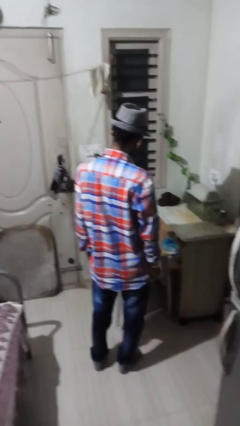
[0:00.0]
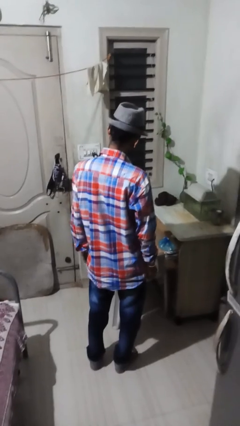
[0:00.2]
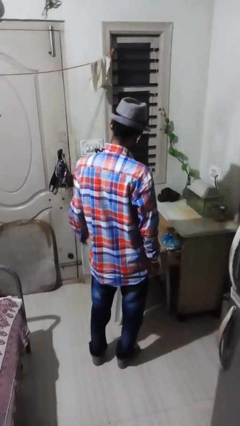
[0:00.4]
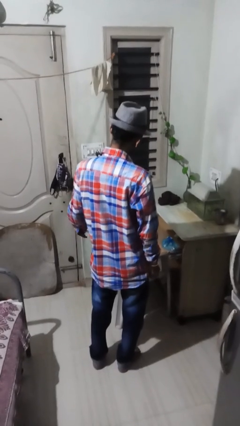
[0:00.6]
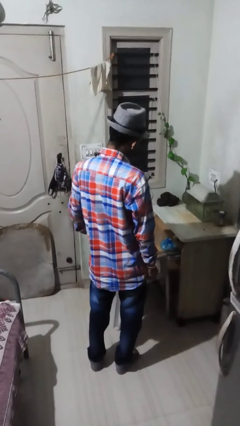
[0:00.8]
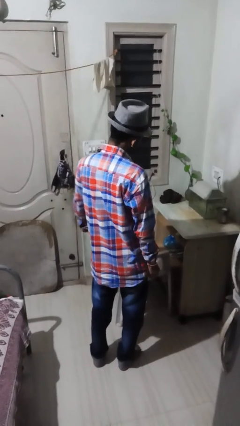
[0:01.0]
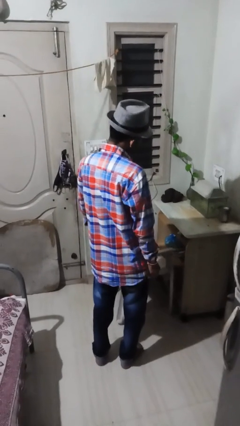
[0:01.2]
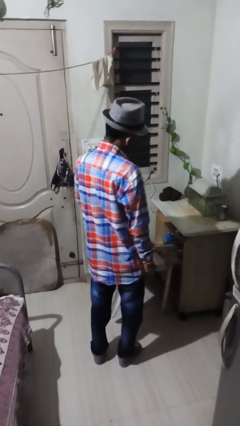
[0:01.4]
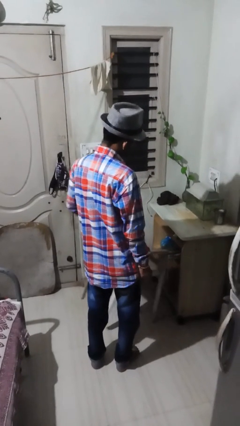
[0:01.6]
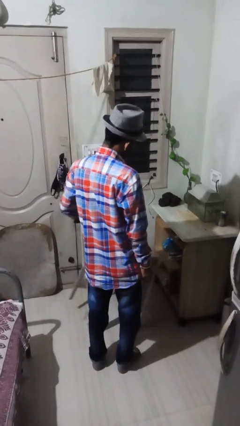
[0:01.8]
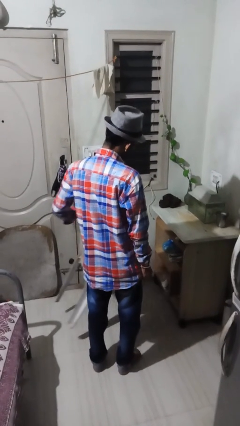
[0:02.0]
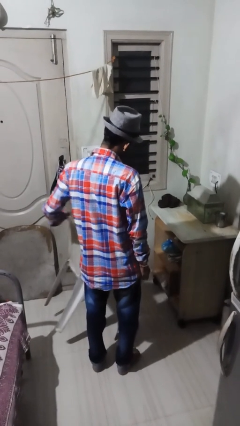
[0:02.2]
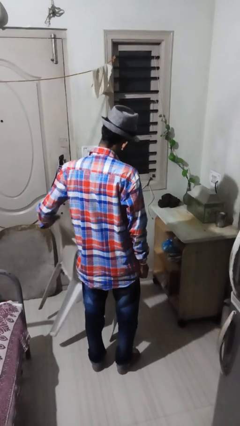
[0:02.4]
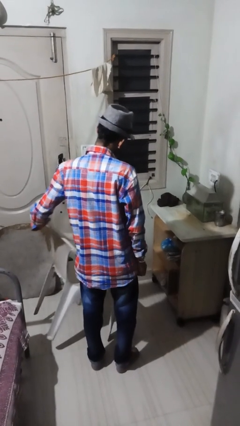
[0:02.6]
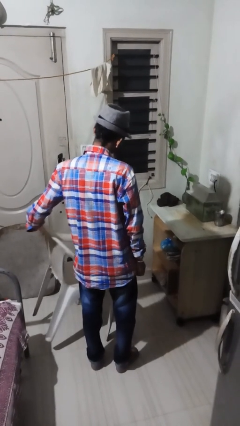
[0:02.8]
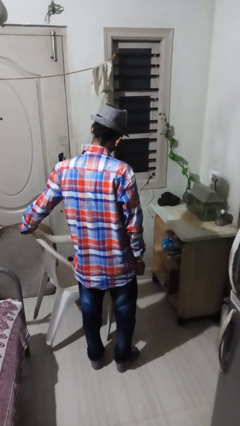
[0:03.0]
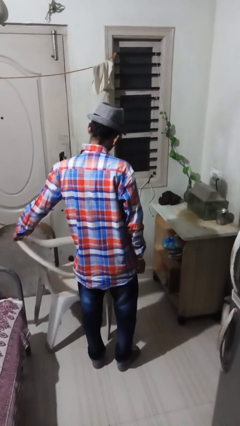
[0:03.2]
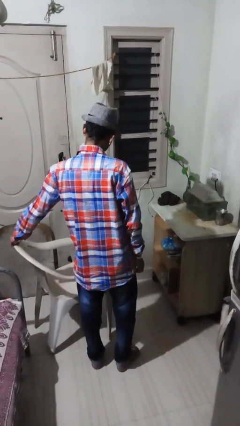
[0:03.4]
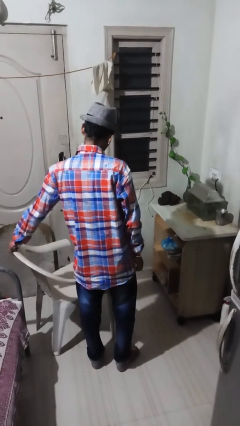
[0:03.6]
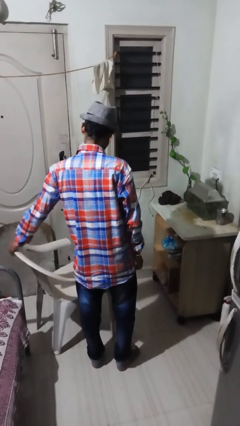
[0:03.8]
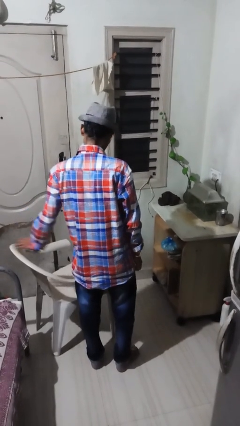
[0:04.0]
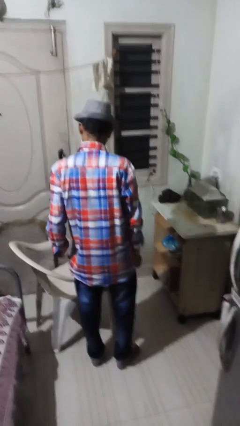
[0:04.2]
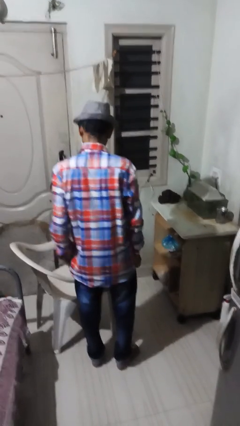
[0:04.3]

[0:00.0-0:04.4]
person pulls out chair

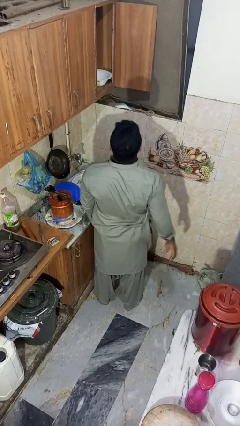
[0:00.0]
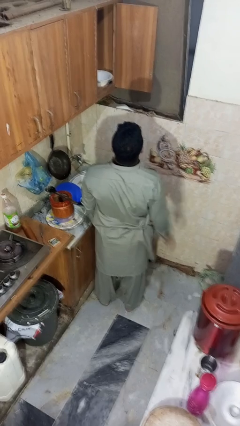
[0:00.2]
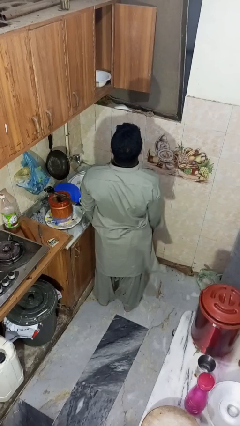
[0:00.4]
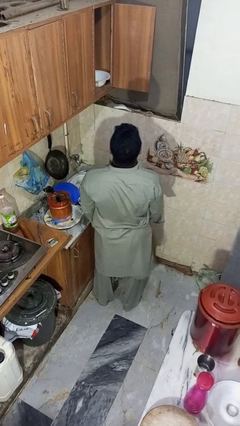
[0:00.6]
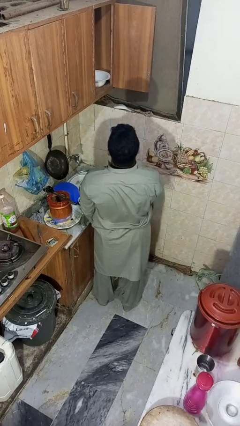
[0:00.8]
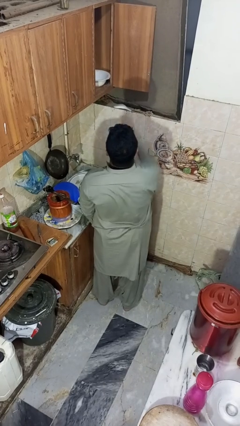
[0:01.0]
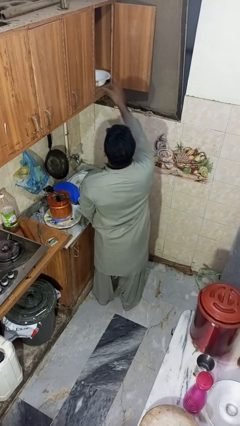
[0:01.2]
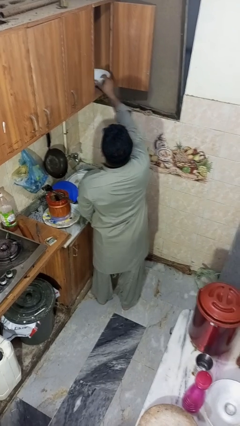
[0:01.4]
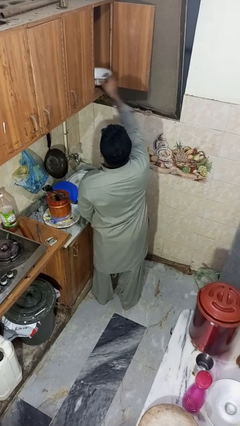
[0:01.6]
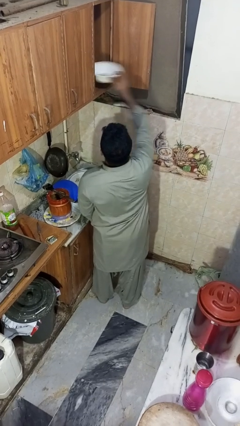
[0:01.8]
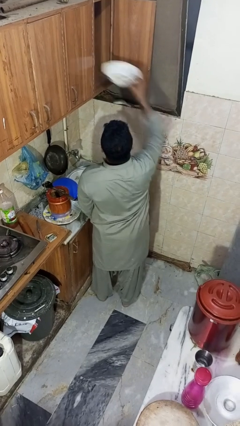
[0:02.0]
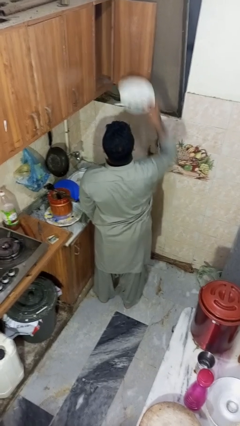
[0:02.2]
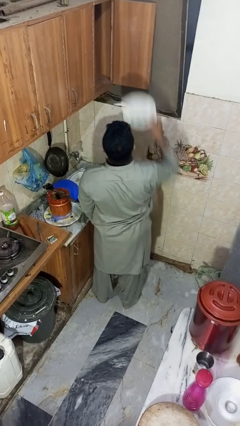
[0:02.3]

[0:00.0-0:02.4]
person takes object from cabinet

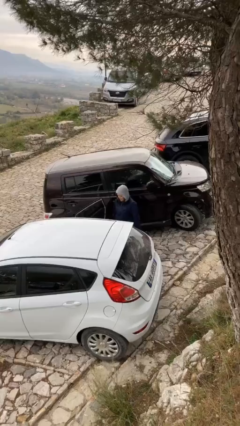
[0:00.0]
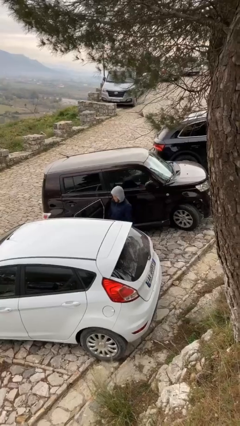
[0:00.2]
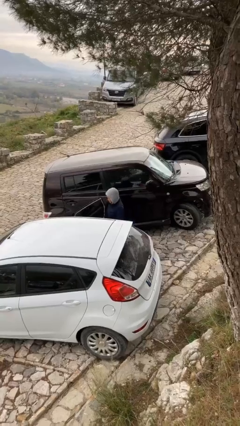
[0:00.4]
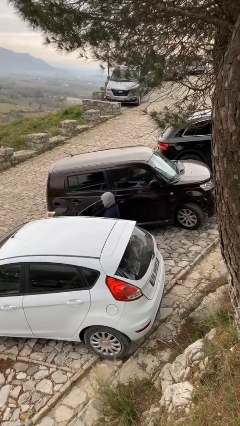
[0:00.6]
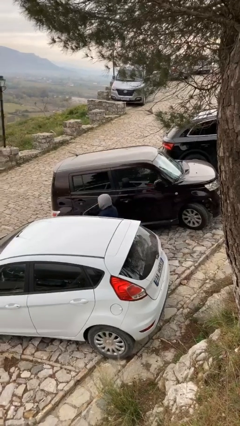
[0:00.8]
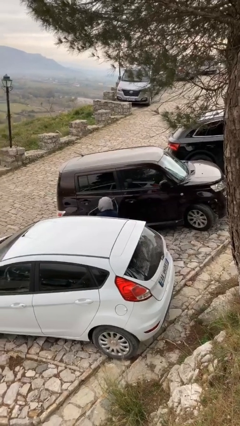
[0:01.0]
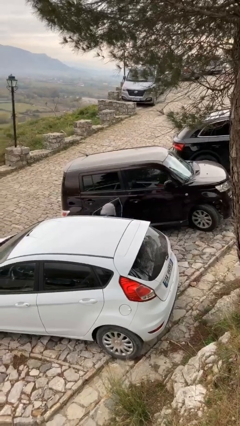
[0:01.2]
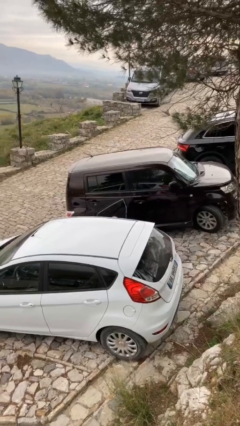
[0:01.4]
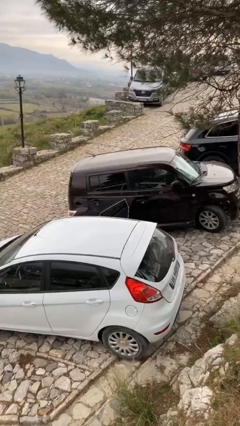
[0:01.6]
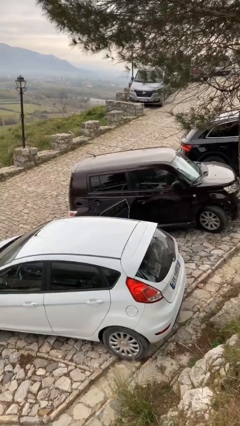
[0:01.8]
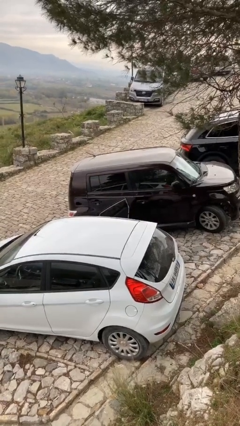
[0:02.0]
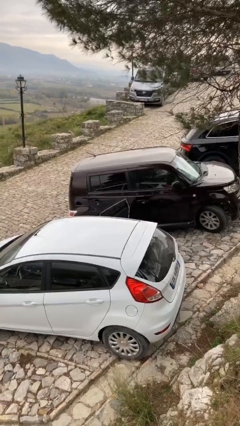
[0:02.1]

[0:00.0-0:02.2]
person enters car

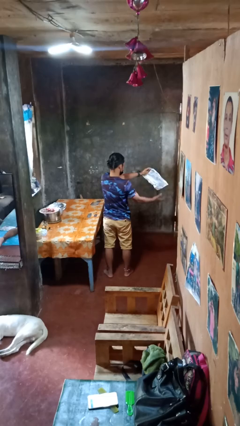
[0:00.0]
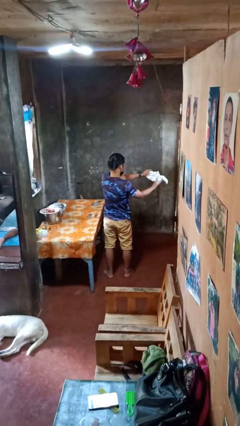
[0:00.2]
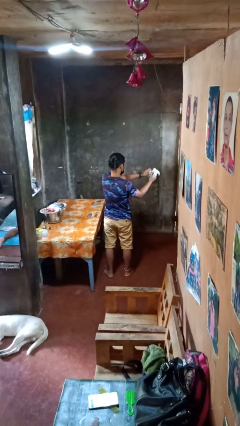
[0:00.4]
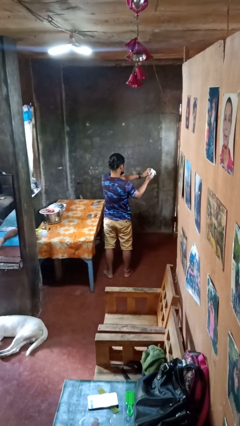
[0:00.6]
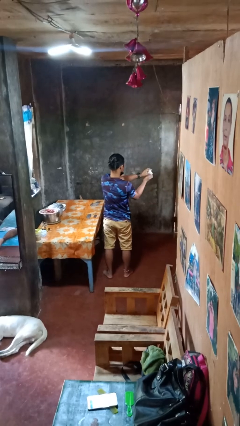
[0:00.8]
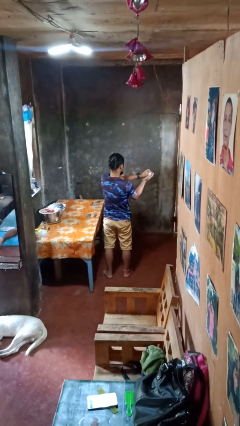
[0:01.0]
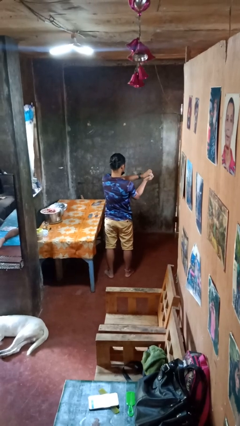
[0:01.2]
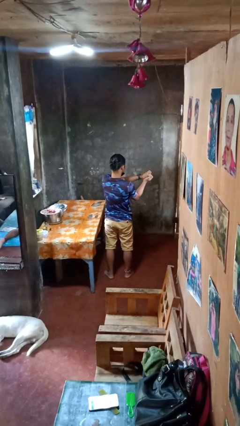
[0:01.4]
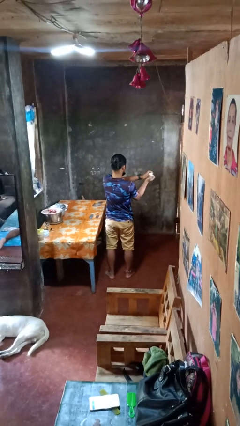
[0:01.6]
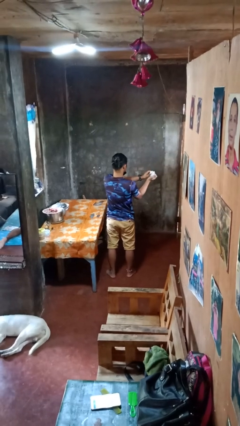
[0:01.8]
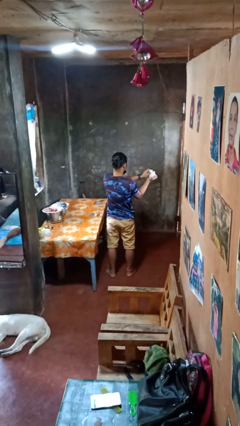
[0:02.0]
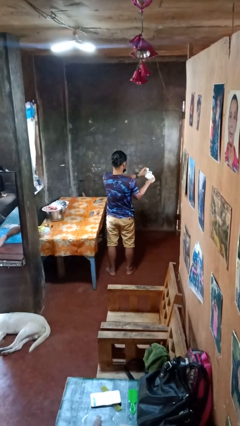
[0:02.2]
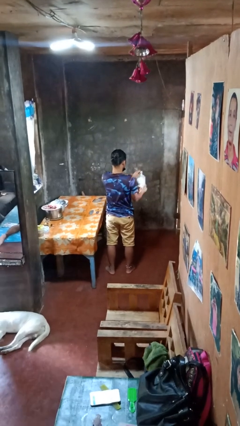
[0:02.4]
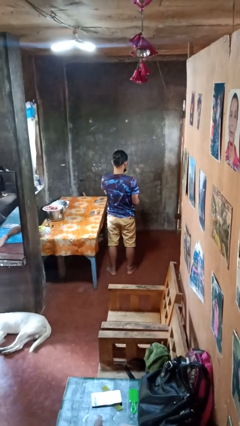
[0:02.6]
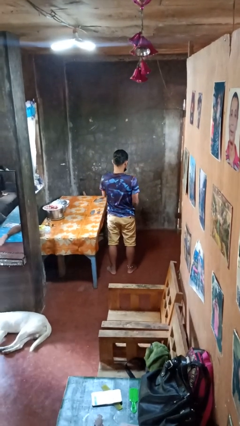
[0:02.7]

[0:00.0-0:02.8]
person crumples paper

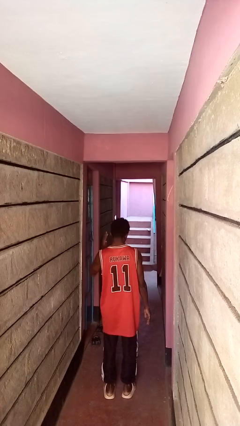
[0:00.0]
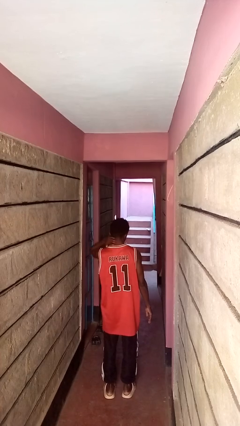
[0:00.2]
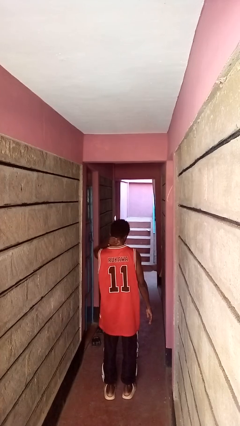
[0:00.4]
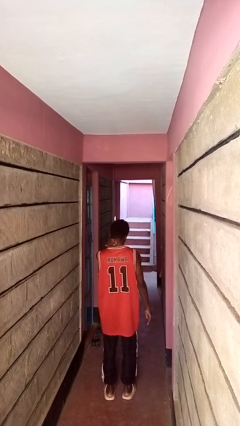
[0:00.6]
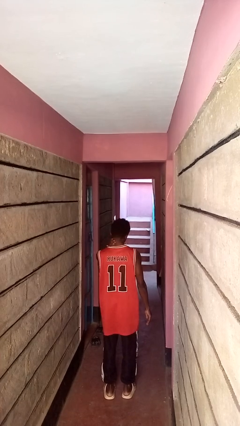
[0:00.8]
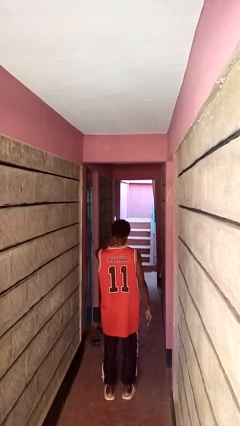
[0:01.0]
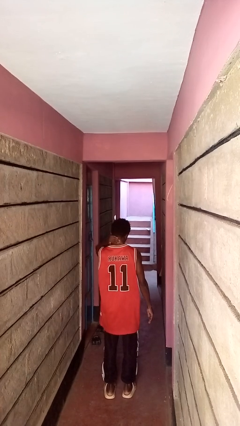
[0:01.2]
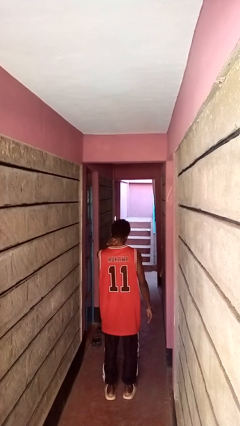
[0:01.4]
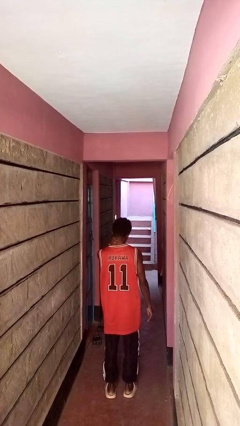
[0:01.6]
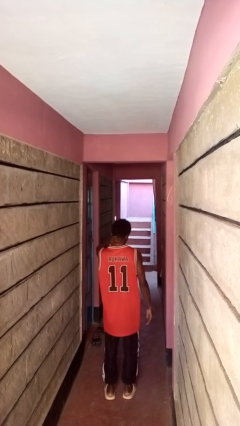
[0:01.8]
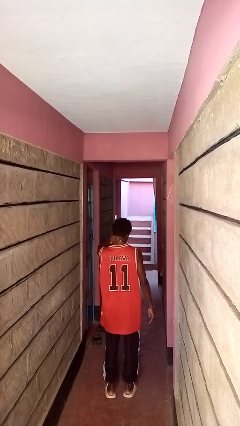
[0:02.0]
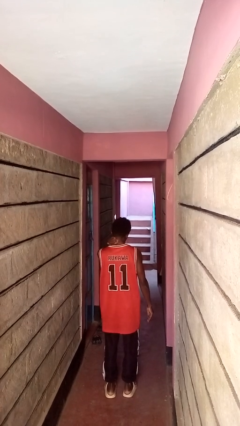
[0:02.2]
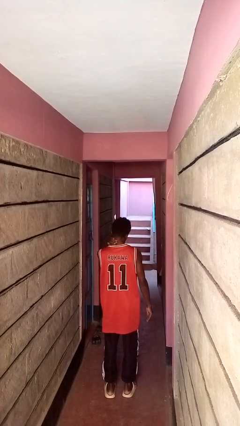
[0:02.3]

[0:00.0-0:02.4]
person rubs neck

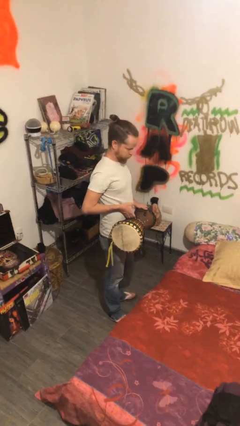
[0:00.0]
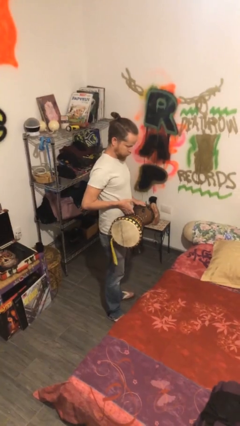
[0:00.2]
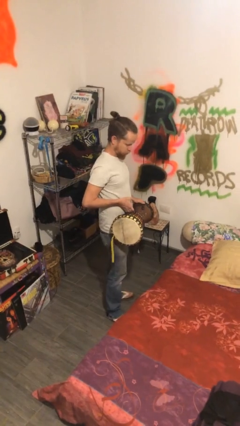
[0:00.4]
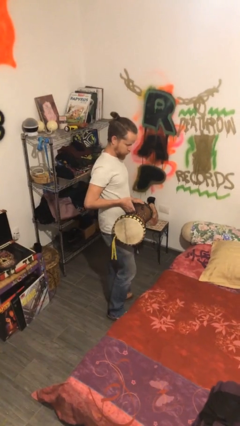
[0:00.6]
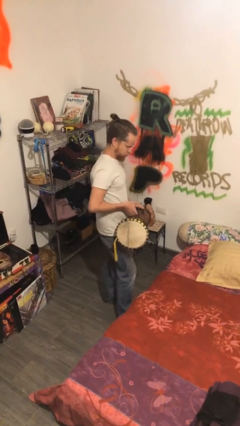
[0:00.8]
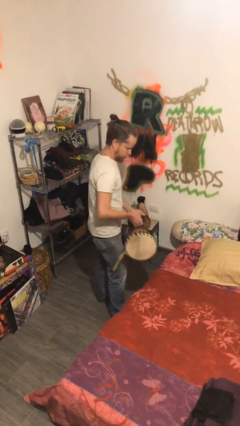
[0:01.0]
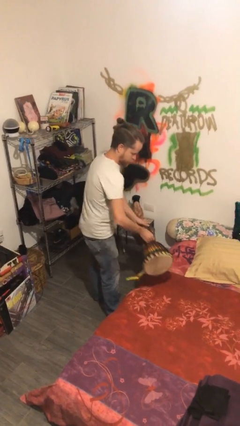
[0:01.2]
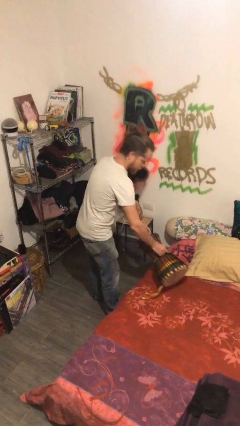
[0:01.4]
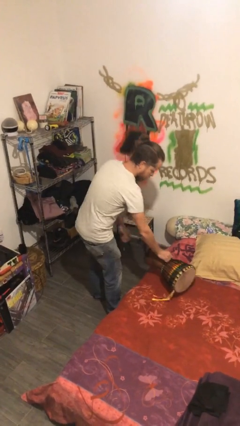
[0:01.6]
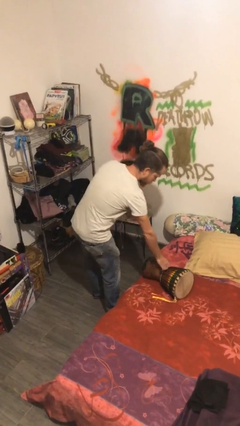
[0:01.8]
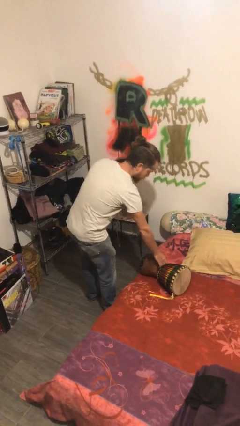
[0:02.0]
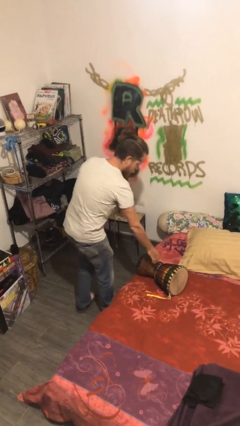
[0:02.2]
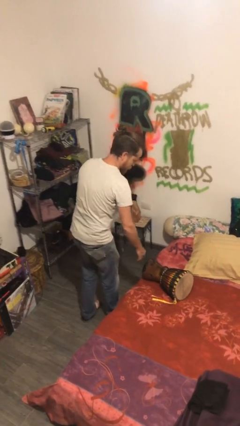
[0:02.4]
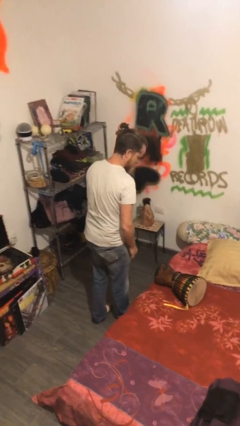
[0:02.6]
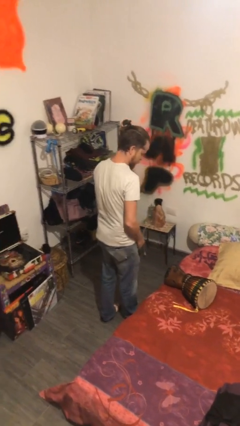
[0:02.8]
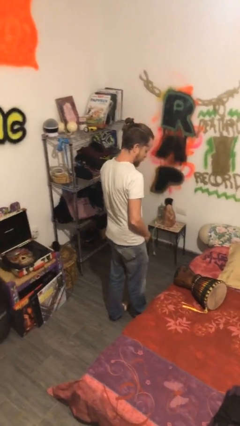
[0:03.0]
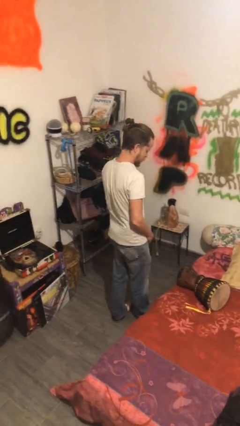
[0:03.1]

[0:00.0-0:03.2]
person puts down object on bed
